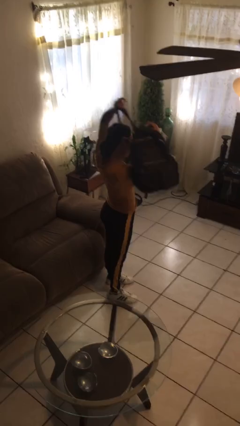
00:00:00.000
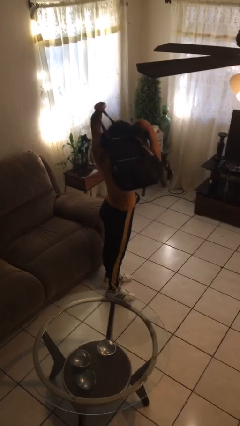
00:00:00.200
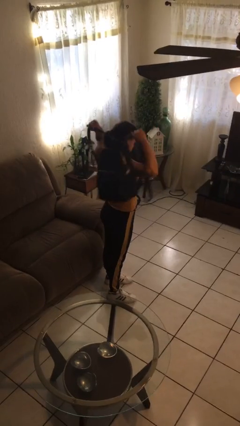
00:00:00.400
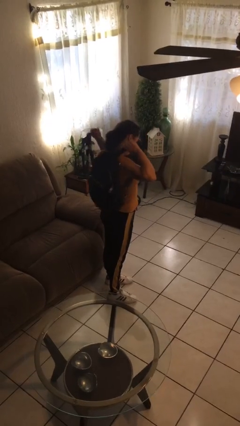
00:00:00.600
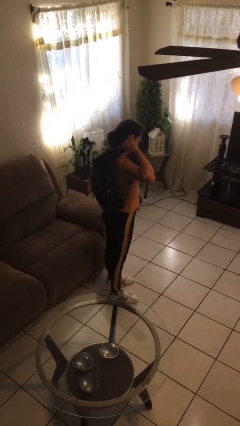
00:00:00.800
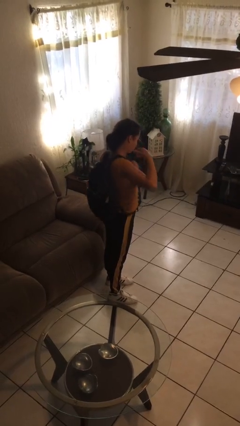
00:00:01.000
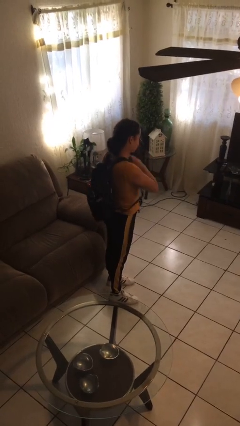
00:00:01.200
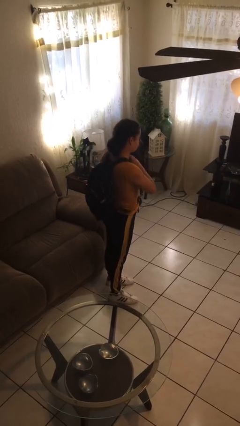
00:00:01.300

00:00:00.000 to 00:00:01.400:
person puts on backpack

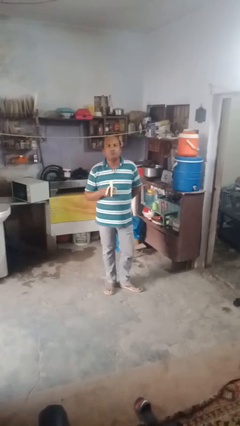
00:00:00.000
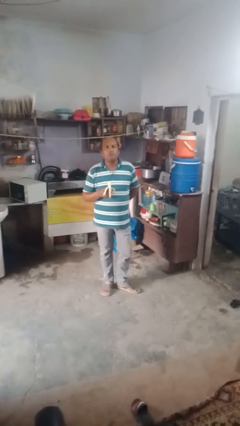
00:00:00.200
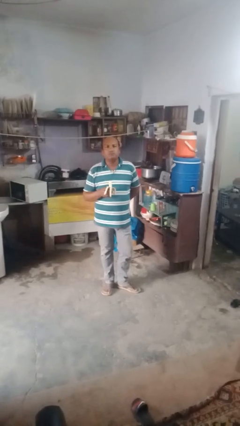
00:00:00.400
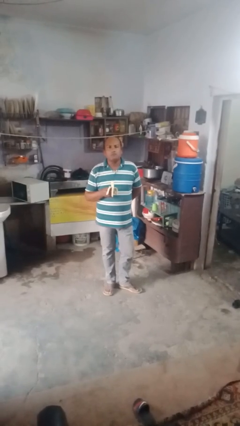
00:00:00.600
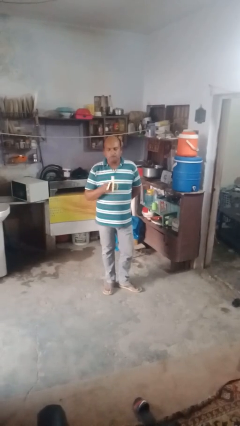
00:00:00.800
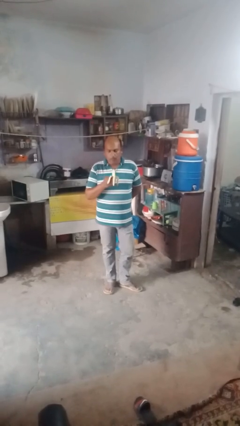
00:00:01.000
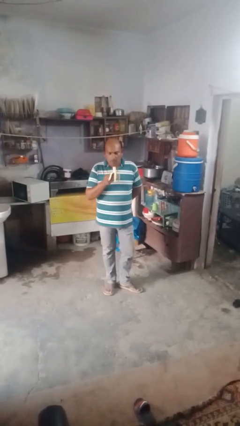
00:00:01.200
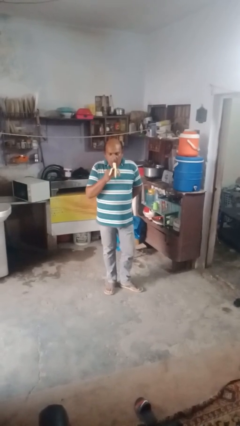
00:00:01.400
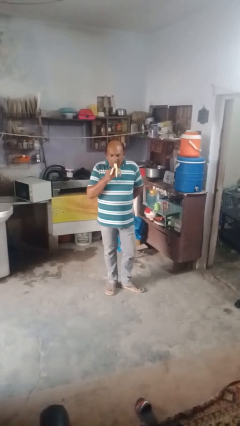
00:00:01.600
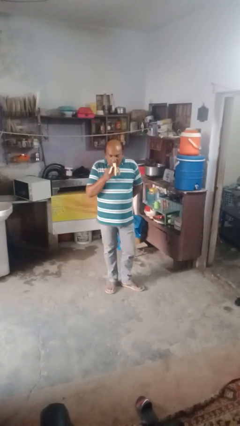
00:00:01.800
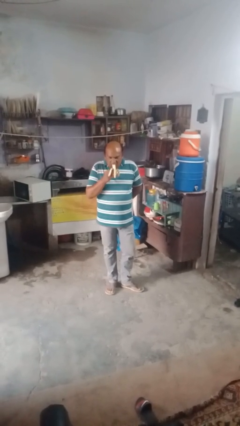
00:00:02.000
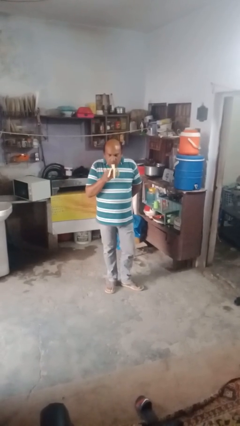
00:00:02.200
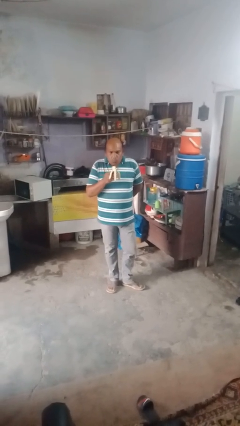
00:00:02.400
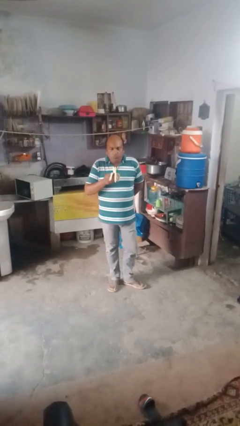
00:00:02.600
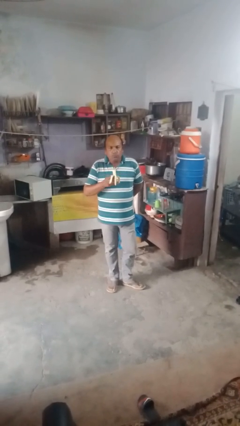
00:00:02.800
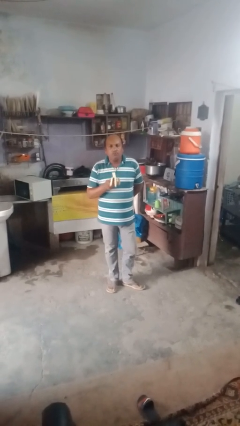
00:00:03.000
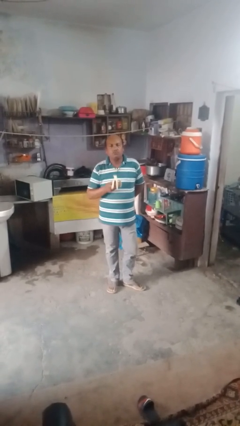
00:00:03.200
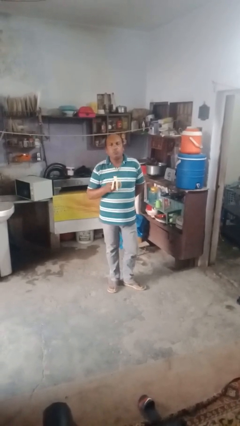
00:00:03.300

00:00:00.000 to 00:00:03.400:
person eats banana

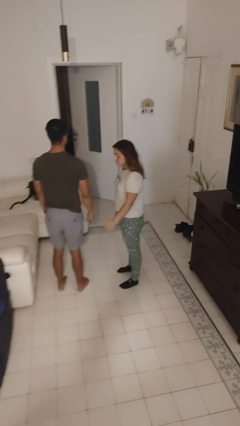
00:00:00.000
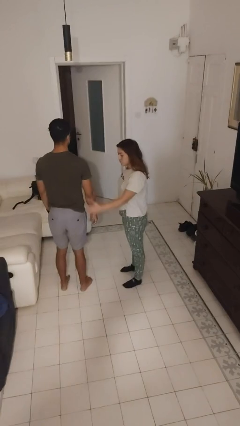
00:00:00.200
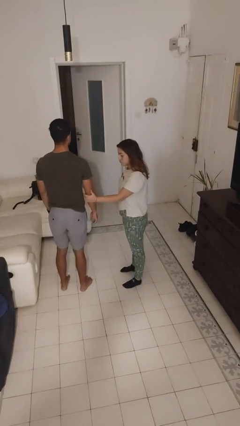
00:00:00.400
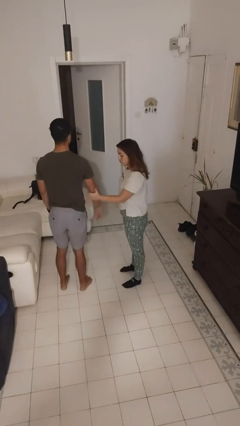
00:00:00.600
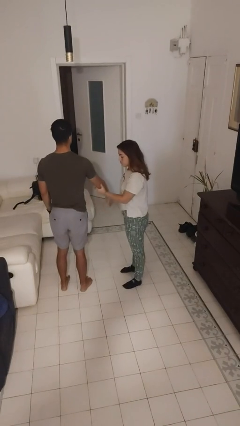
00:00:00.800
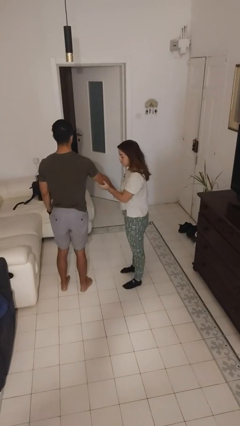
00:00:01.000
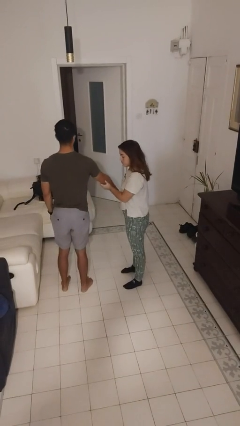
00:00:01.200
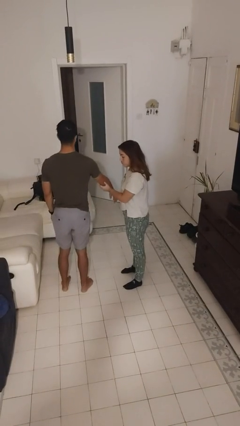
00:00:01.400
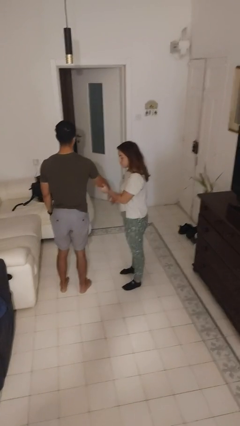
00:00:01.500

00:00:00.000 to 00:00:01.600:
person grabs person by forearm

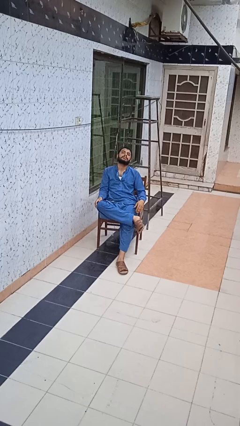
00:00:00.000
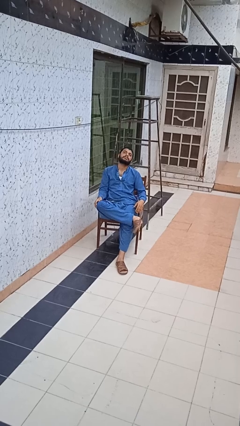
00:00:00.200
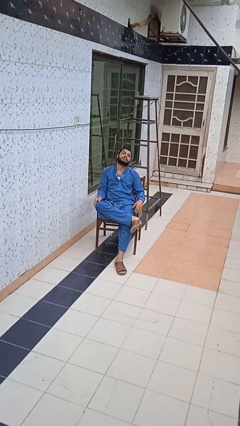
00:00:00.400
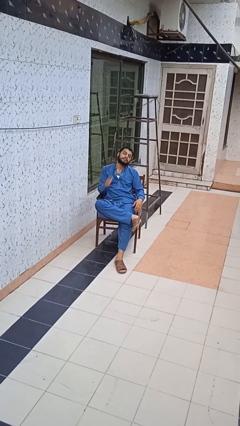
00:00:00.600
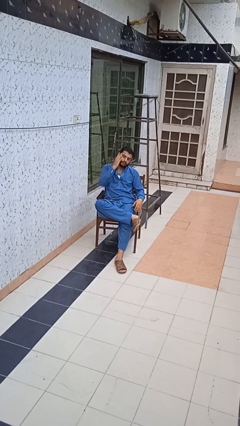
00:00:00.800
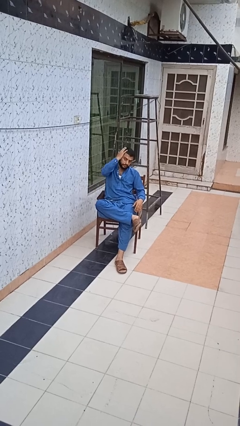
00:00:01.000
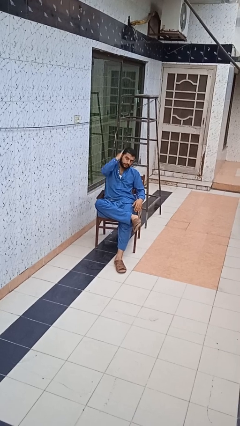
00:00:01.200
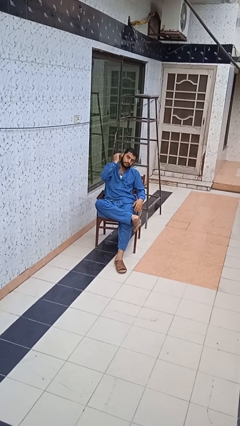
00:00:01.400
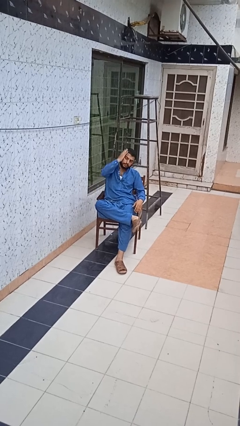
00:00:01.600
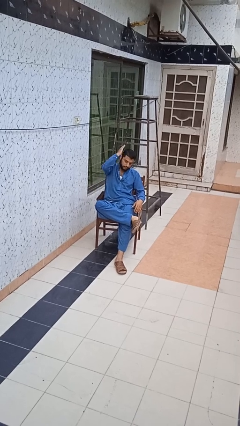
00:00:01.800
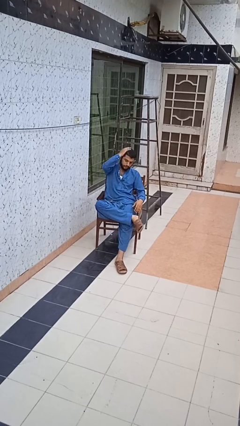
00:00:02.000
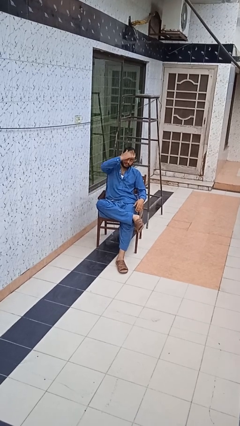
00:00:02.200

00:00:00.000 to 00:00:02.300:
person strokes hair

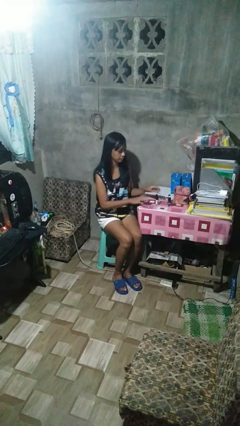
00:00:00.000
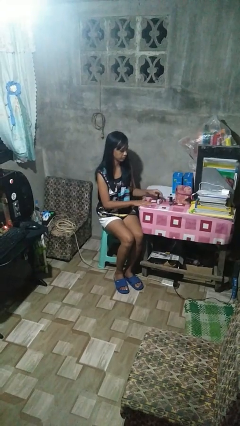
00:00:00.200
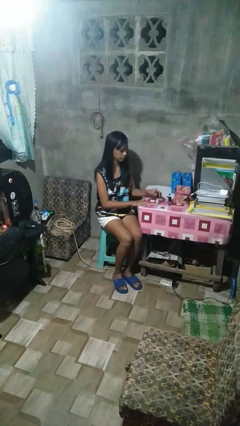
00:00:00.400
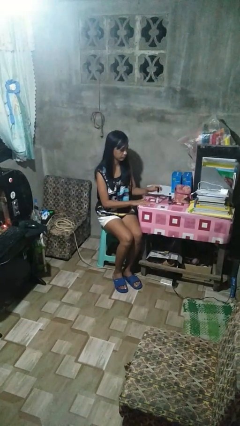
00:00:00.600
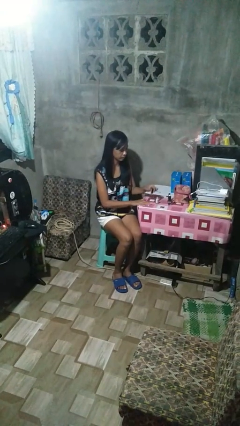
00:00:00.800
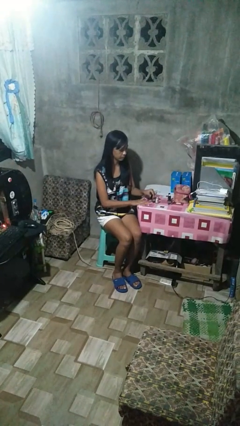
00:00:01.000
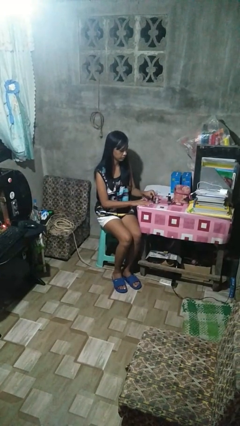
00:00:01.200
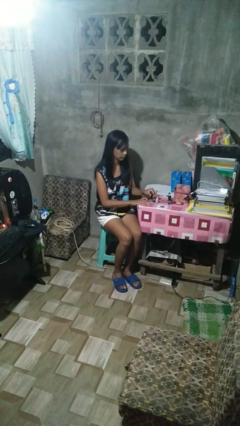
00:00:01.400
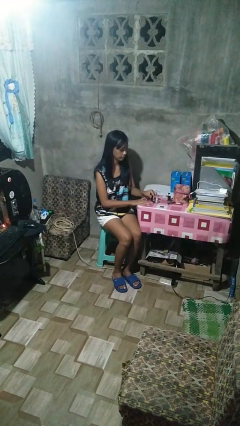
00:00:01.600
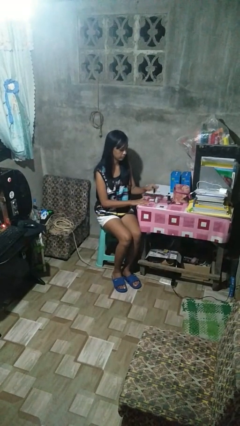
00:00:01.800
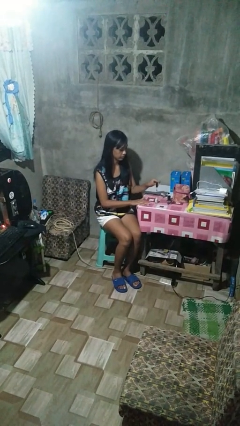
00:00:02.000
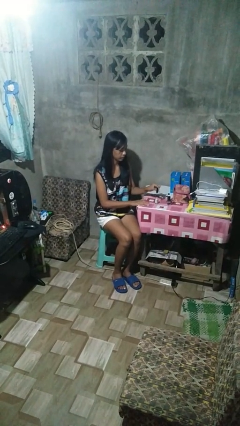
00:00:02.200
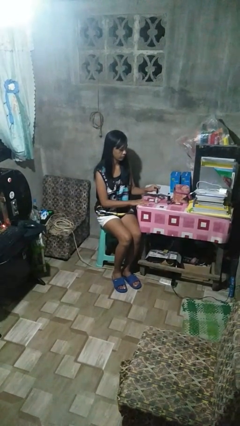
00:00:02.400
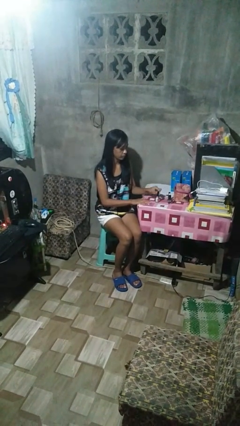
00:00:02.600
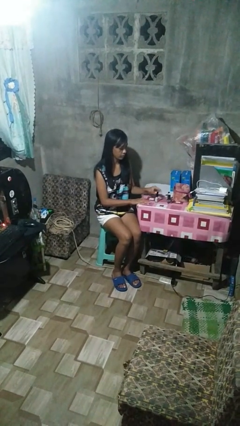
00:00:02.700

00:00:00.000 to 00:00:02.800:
person paints fingernails

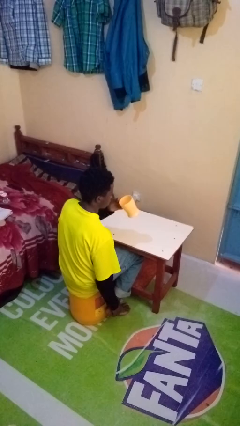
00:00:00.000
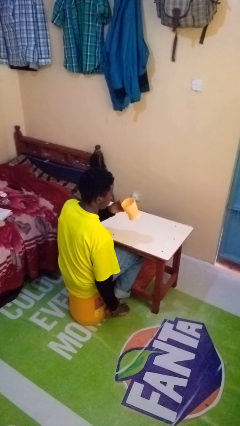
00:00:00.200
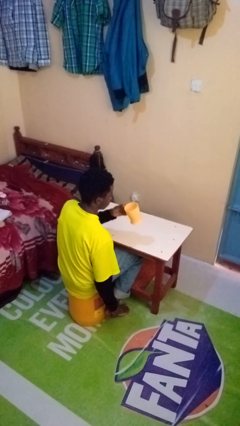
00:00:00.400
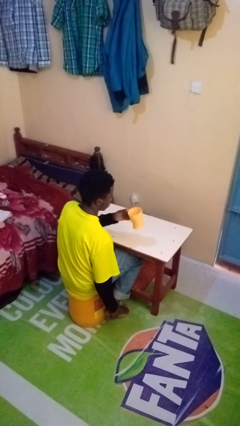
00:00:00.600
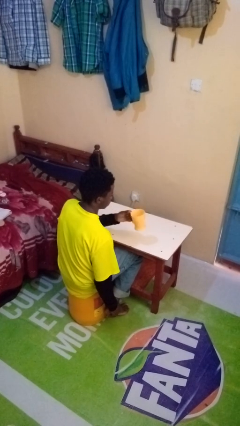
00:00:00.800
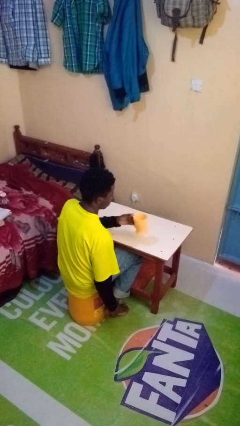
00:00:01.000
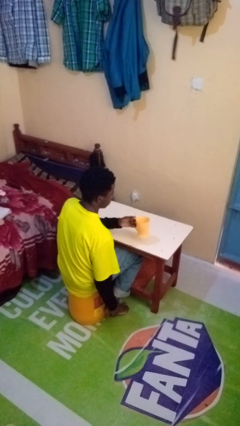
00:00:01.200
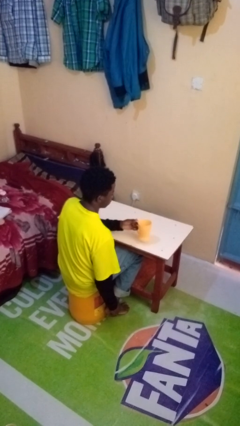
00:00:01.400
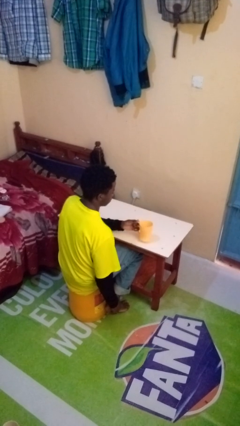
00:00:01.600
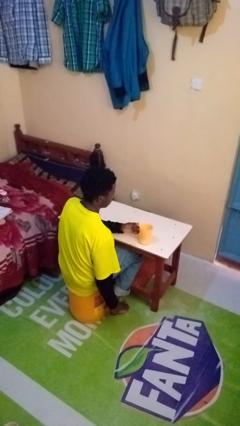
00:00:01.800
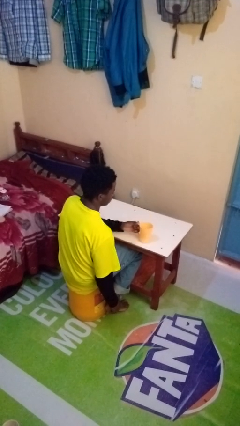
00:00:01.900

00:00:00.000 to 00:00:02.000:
person puts down object on table

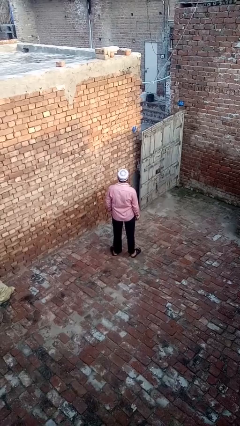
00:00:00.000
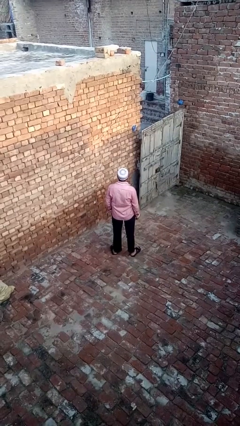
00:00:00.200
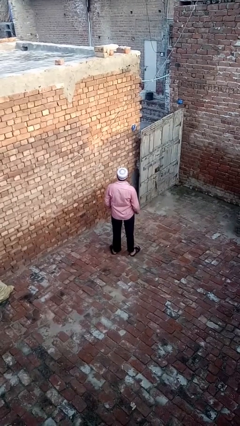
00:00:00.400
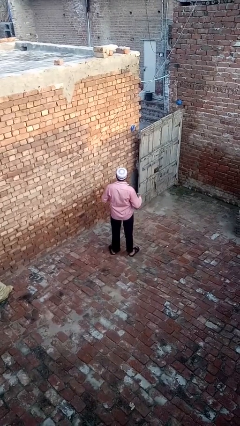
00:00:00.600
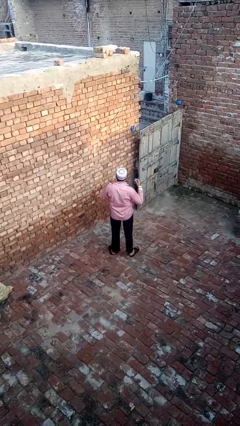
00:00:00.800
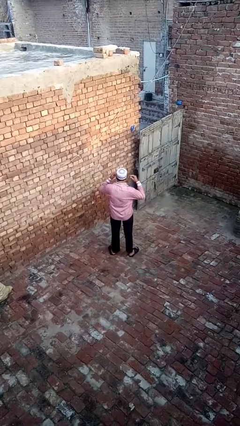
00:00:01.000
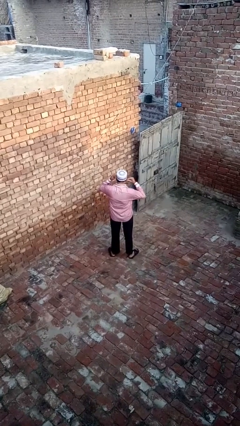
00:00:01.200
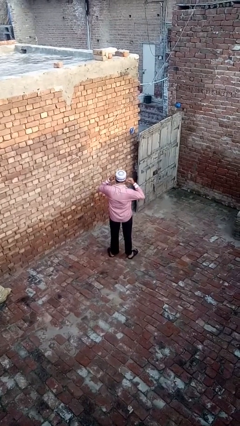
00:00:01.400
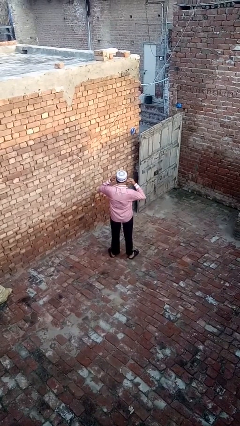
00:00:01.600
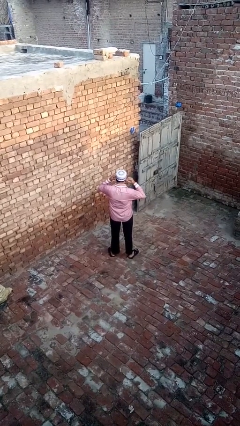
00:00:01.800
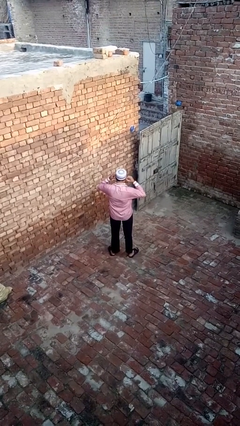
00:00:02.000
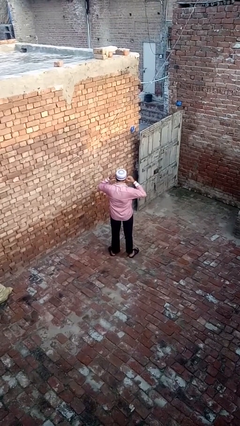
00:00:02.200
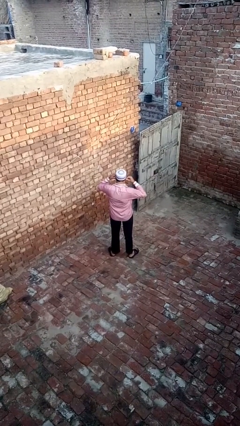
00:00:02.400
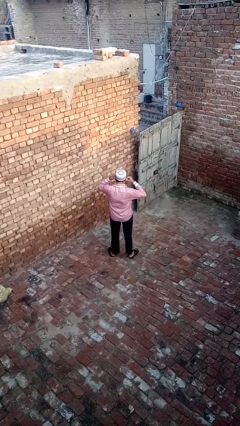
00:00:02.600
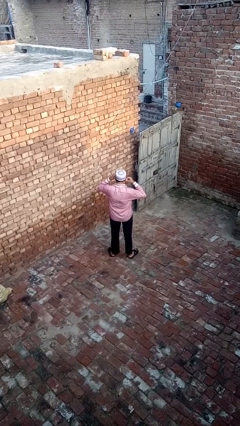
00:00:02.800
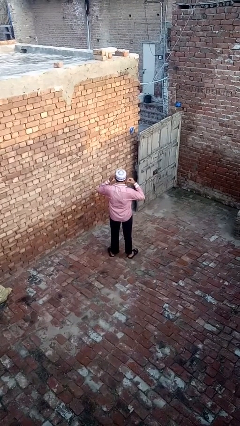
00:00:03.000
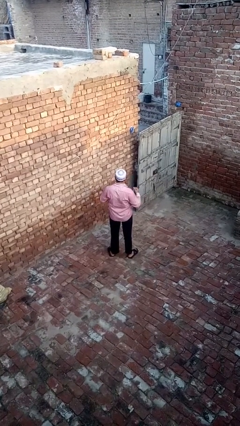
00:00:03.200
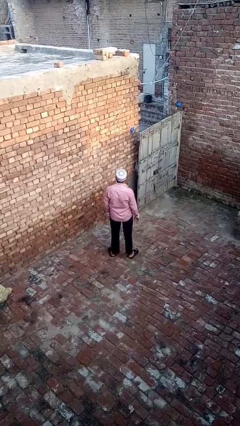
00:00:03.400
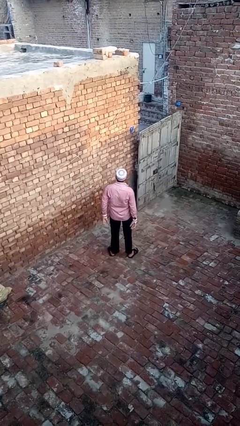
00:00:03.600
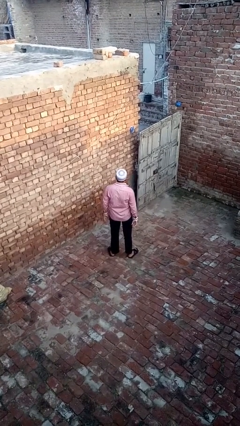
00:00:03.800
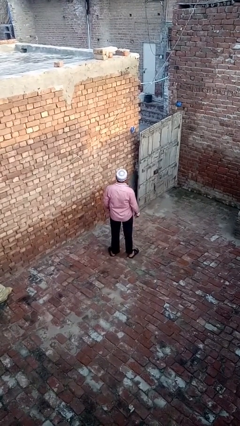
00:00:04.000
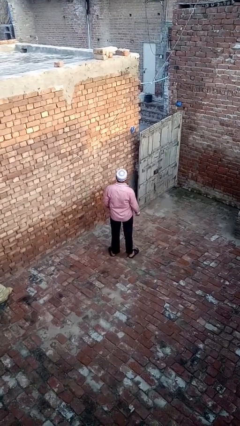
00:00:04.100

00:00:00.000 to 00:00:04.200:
person puts on headphones
